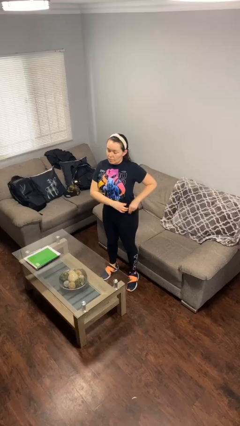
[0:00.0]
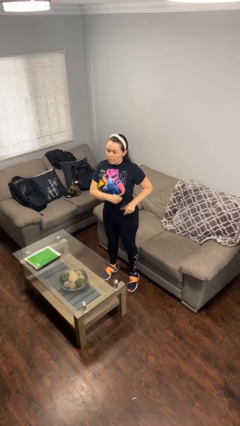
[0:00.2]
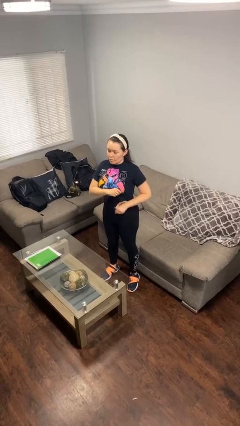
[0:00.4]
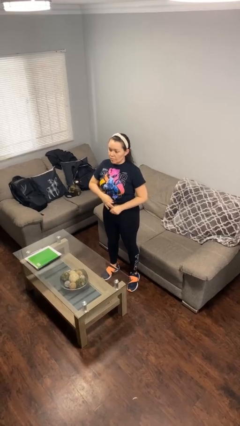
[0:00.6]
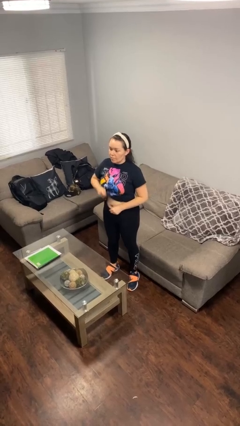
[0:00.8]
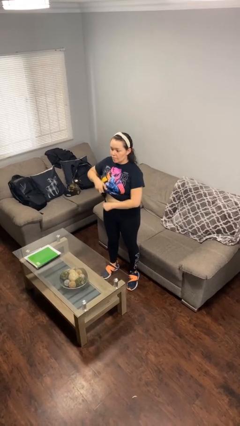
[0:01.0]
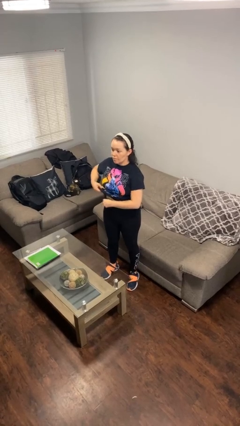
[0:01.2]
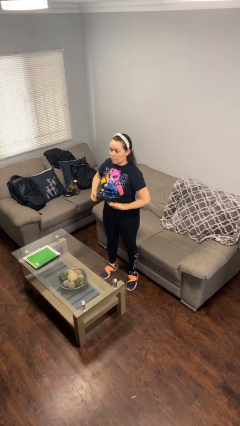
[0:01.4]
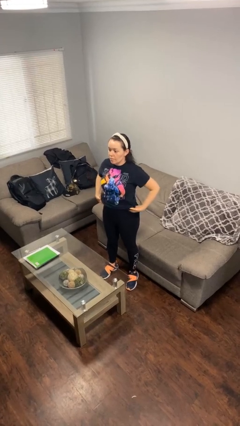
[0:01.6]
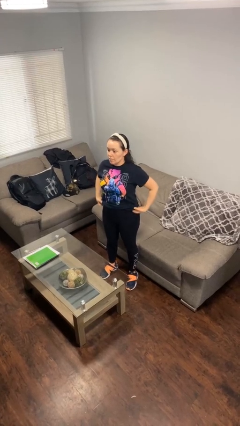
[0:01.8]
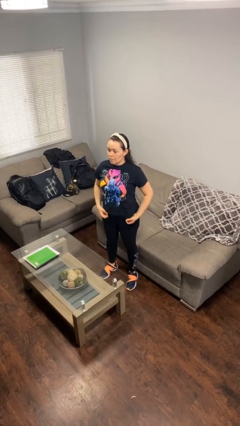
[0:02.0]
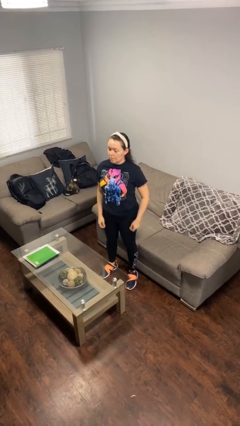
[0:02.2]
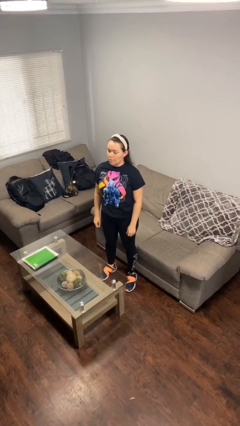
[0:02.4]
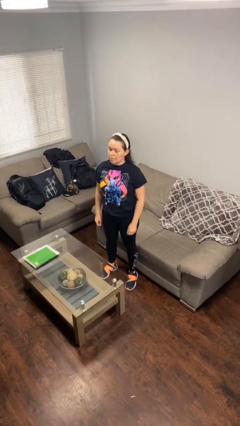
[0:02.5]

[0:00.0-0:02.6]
person untucks shirt

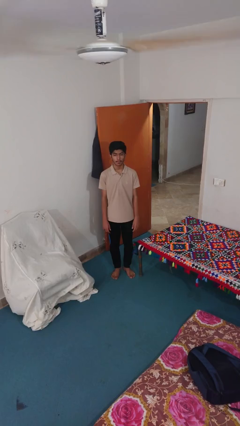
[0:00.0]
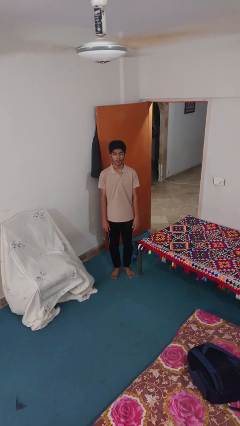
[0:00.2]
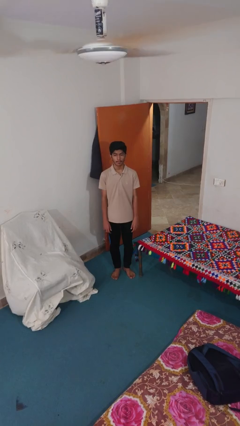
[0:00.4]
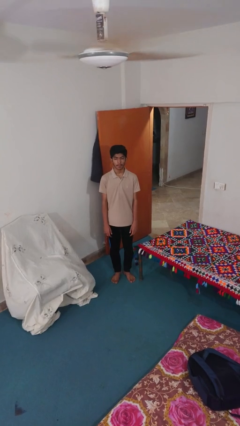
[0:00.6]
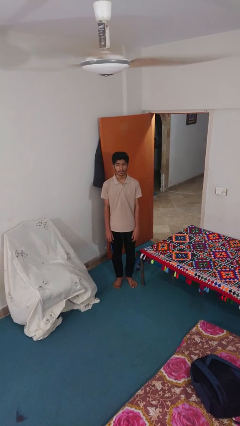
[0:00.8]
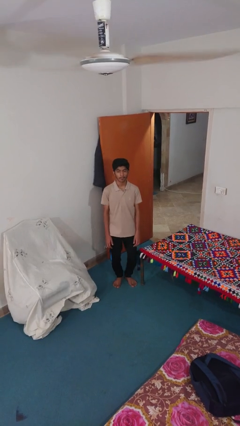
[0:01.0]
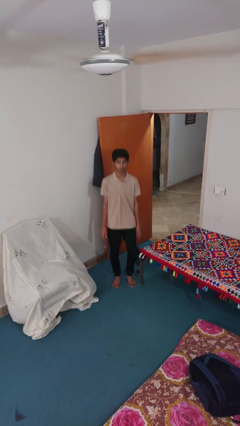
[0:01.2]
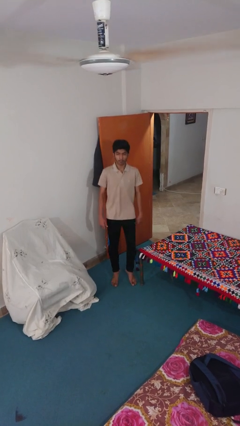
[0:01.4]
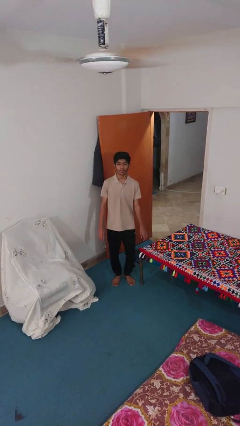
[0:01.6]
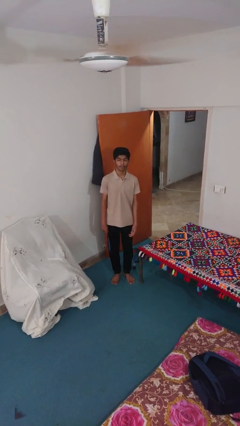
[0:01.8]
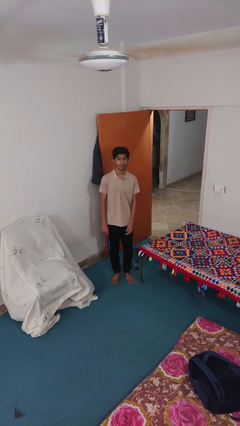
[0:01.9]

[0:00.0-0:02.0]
person jumps

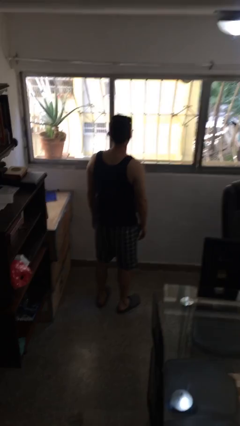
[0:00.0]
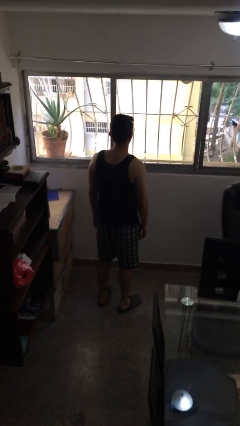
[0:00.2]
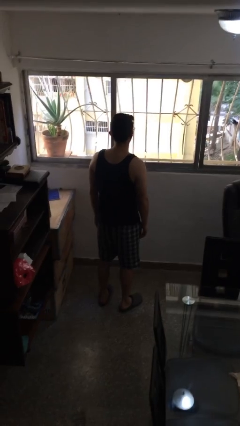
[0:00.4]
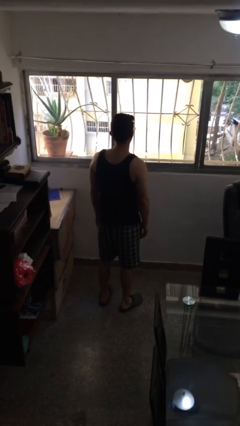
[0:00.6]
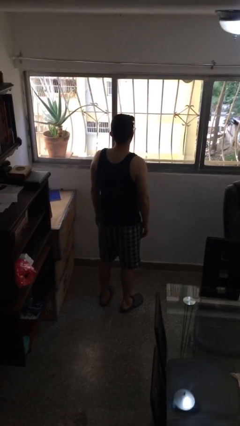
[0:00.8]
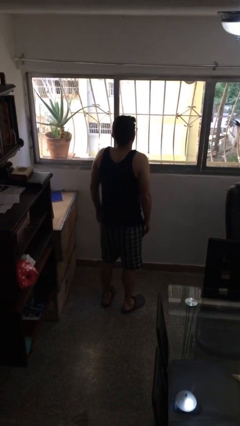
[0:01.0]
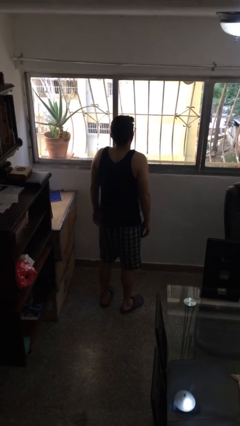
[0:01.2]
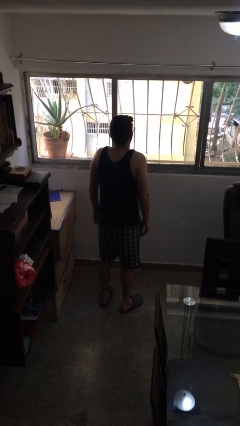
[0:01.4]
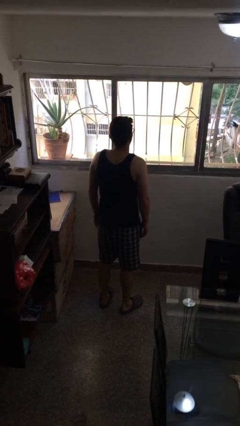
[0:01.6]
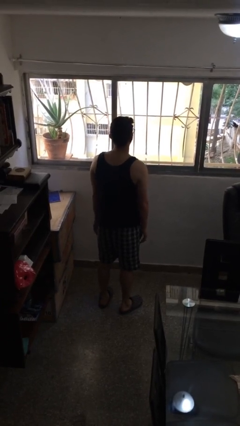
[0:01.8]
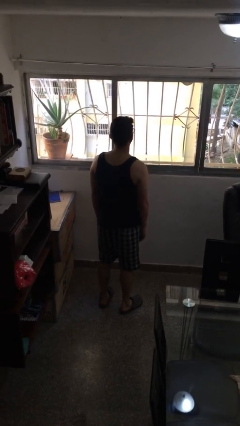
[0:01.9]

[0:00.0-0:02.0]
person shrugs

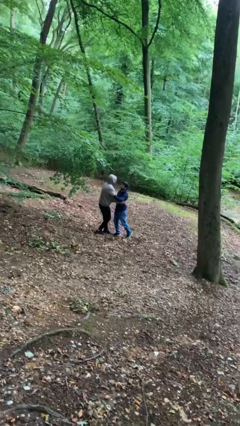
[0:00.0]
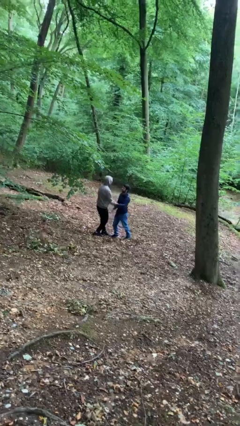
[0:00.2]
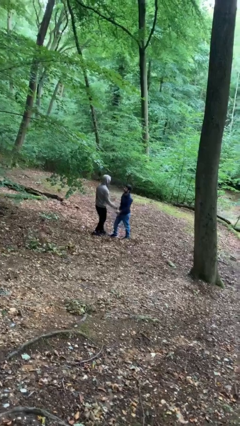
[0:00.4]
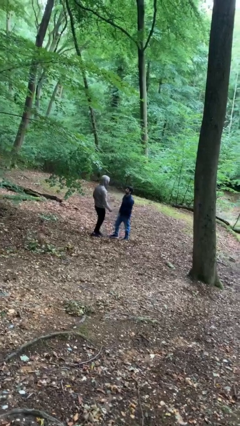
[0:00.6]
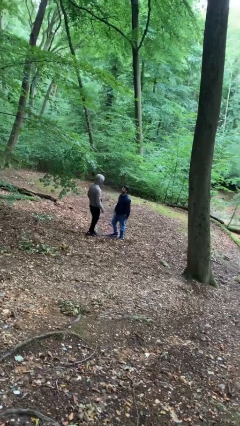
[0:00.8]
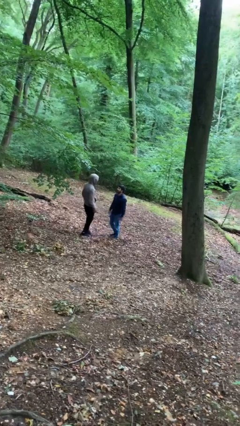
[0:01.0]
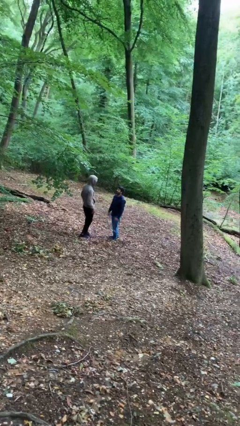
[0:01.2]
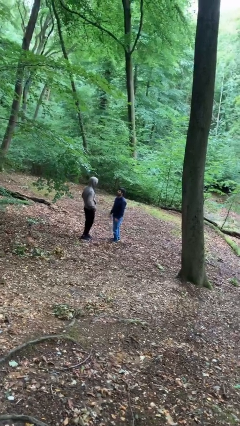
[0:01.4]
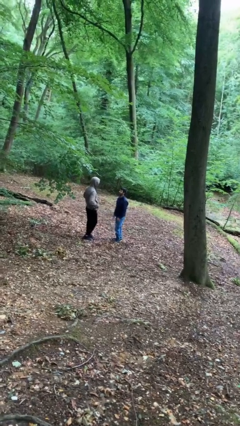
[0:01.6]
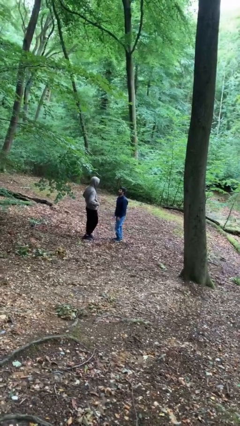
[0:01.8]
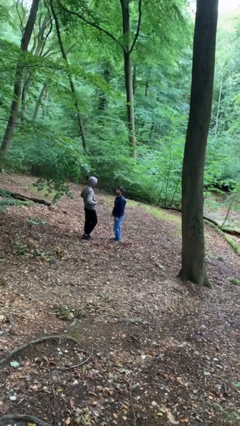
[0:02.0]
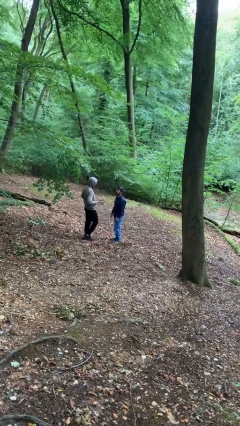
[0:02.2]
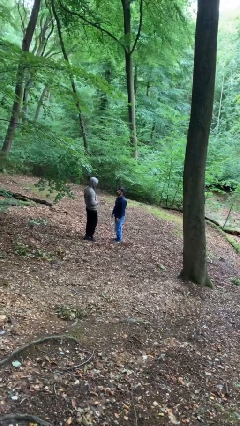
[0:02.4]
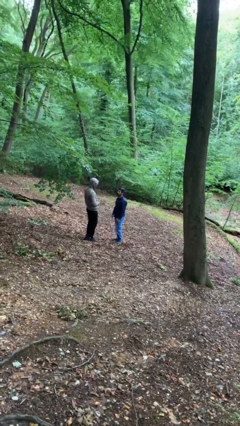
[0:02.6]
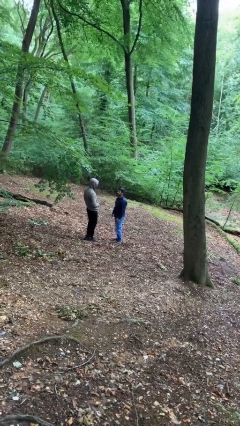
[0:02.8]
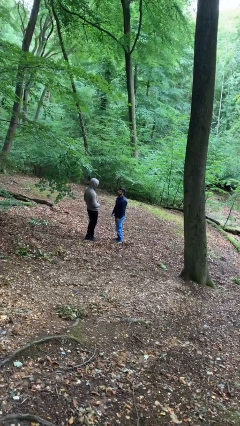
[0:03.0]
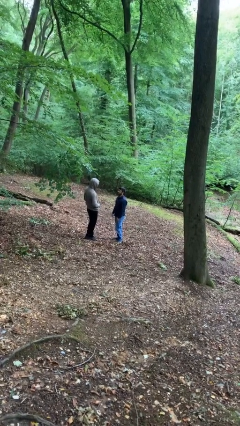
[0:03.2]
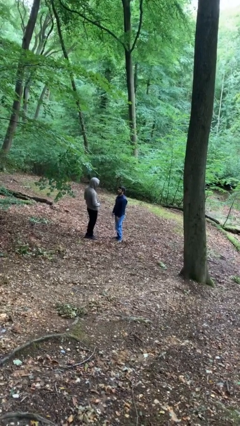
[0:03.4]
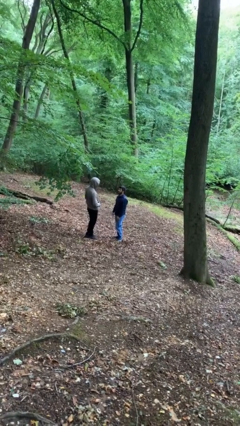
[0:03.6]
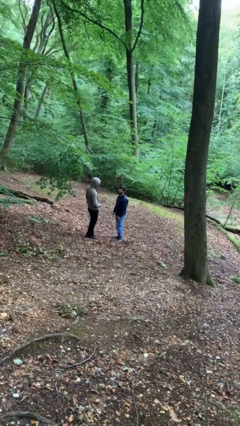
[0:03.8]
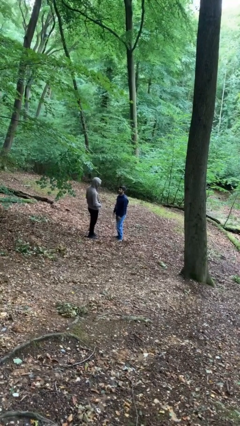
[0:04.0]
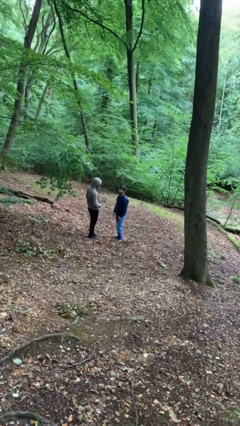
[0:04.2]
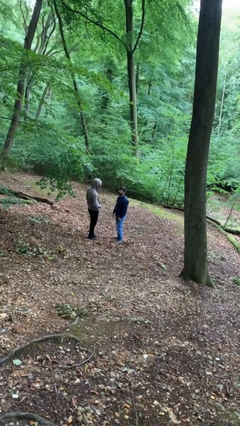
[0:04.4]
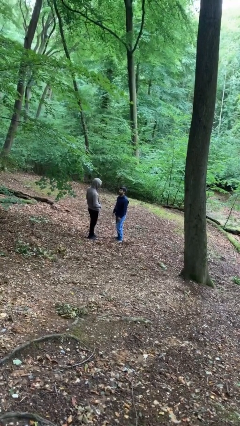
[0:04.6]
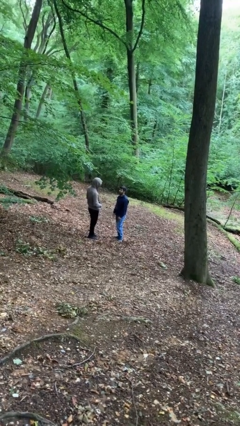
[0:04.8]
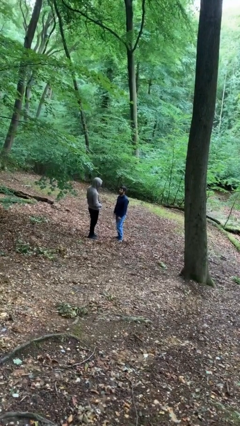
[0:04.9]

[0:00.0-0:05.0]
person talks to person

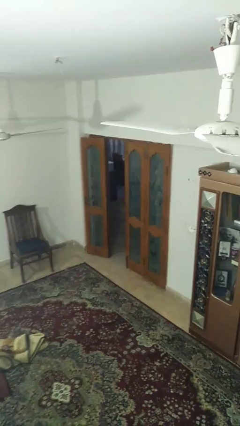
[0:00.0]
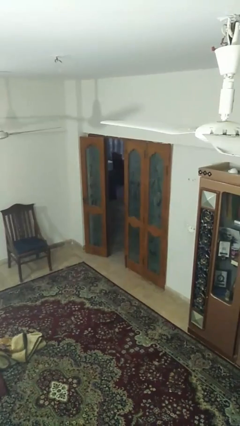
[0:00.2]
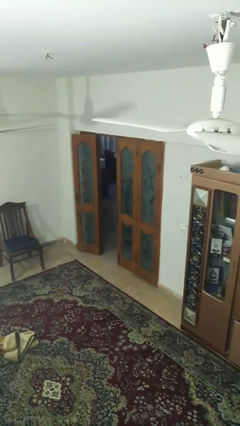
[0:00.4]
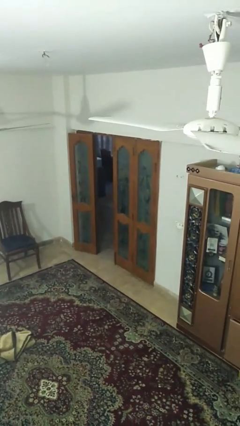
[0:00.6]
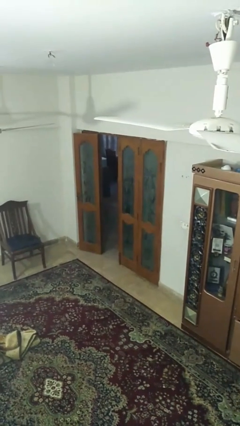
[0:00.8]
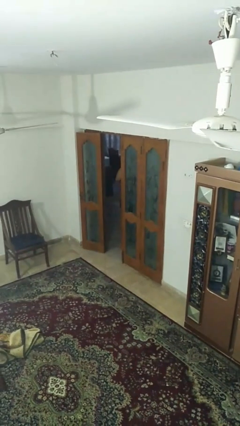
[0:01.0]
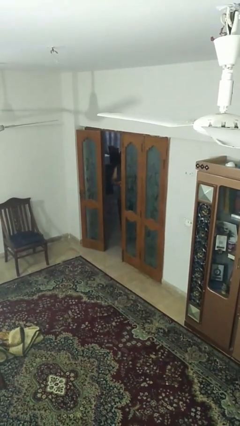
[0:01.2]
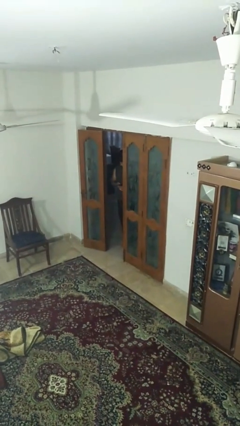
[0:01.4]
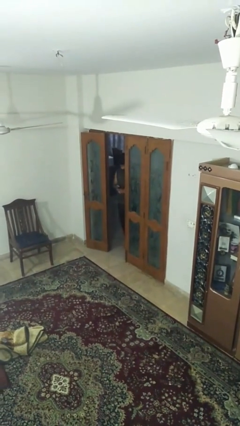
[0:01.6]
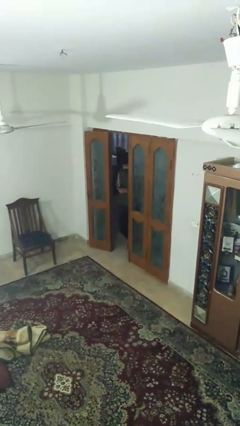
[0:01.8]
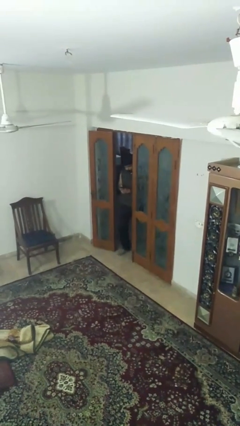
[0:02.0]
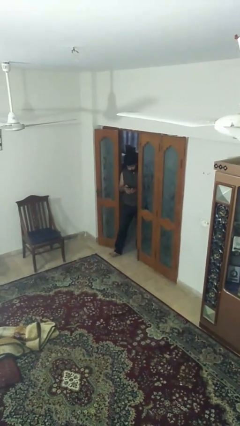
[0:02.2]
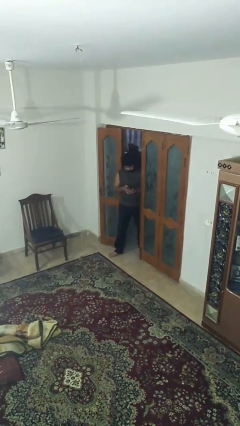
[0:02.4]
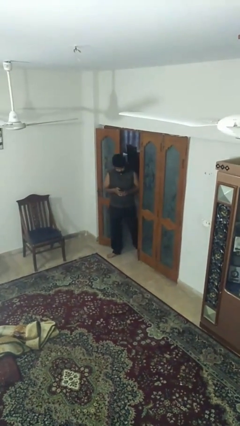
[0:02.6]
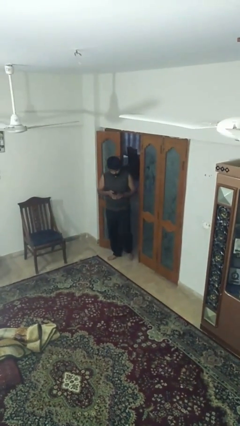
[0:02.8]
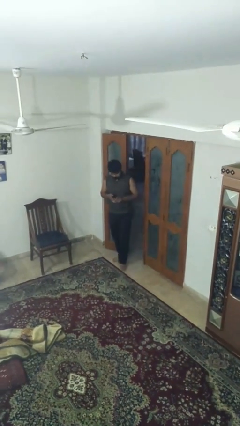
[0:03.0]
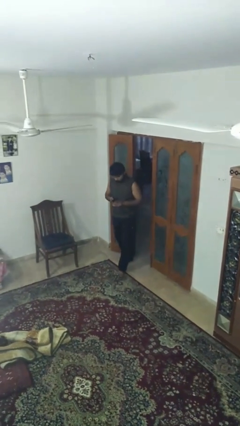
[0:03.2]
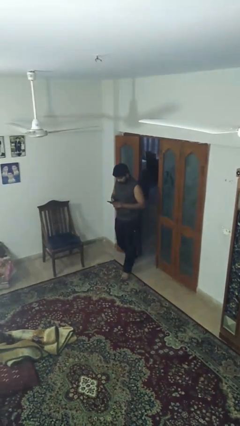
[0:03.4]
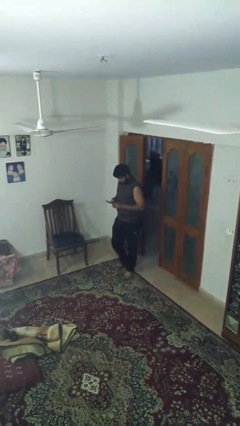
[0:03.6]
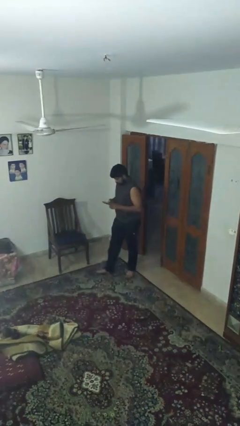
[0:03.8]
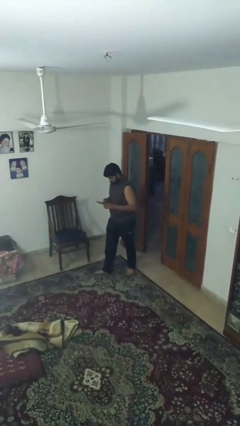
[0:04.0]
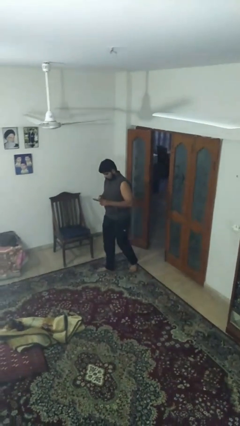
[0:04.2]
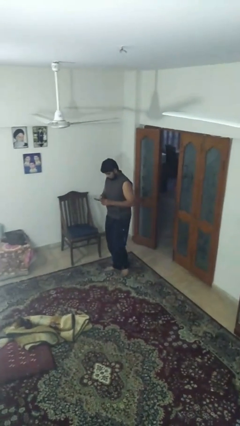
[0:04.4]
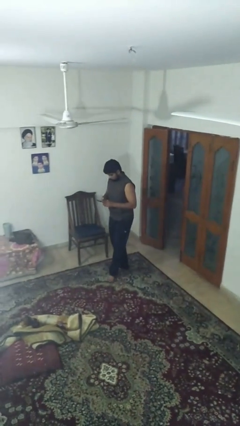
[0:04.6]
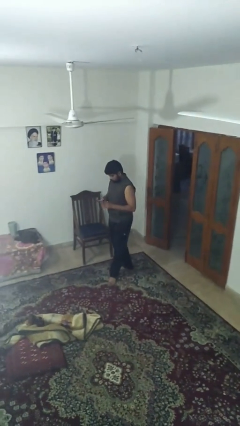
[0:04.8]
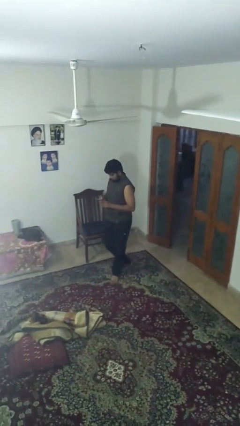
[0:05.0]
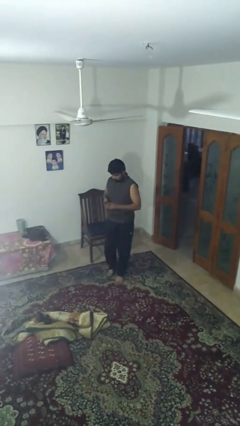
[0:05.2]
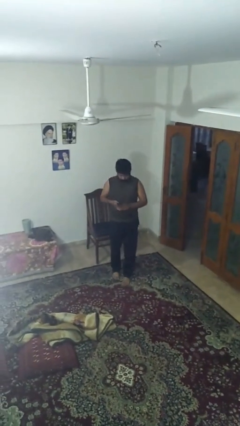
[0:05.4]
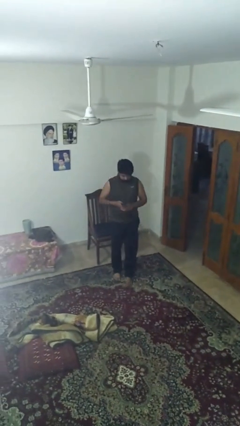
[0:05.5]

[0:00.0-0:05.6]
person enters scene through structure

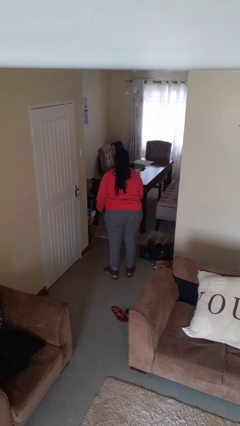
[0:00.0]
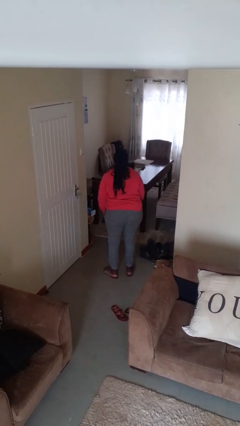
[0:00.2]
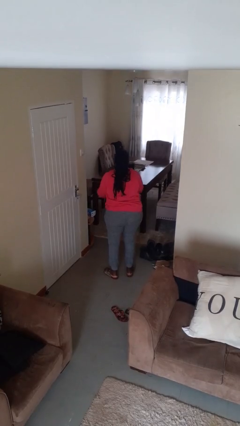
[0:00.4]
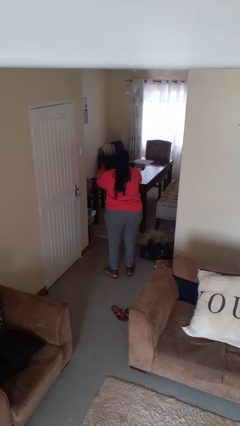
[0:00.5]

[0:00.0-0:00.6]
person picks up object from floor
